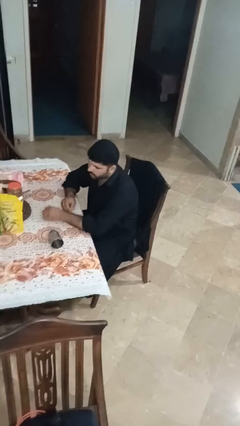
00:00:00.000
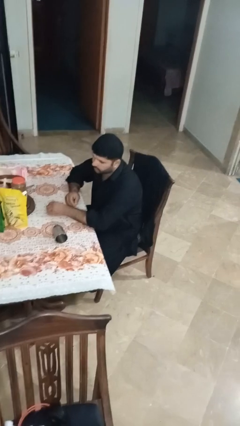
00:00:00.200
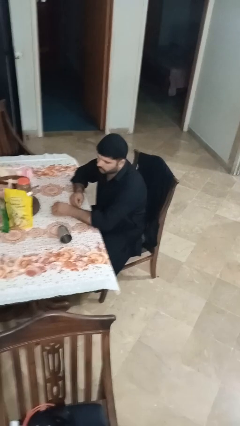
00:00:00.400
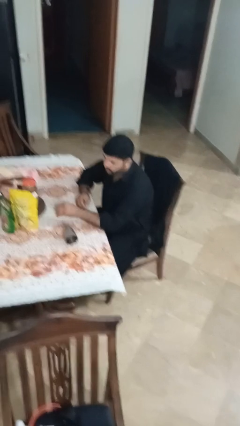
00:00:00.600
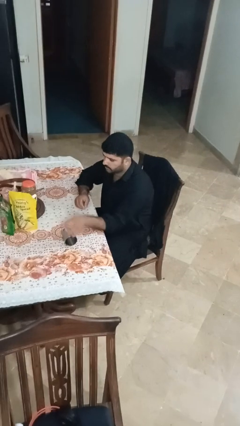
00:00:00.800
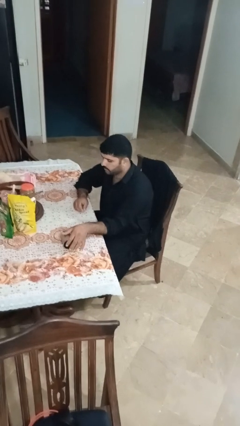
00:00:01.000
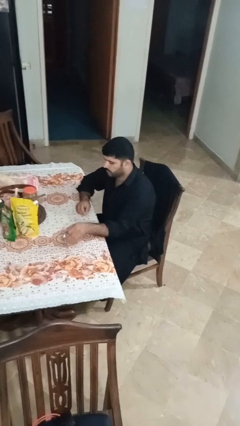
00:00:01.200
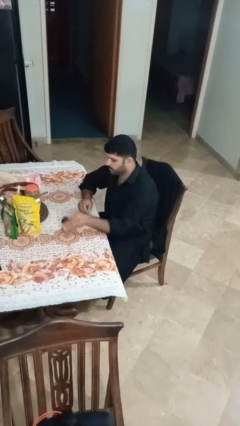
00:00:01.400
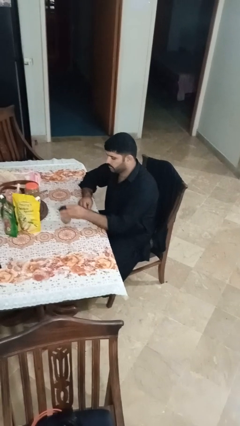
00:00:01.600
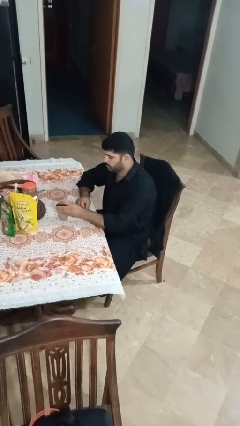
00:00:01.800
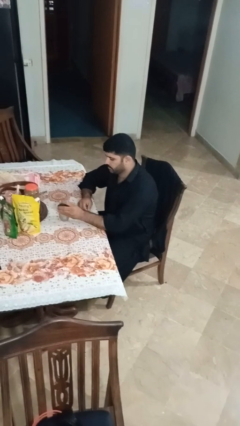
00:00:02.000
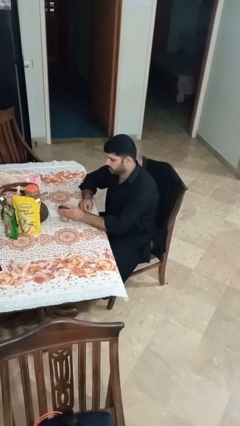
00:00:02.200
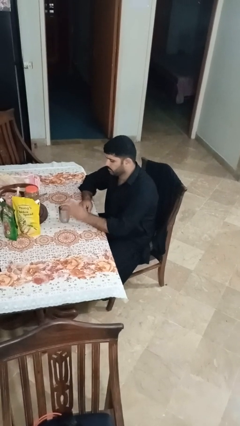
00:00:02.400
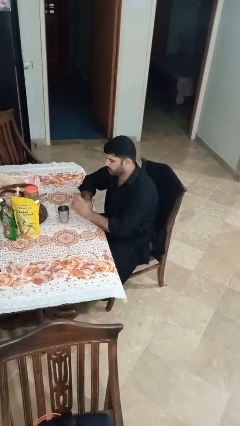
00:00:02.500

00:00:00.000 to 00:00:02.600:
person sets upright glass

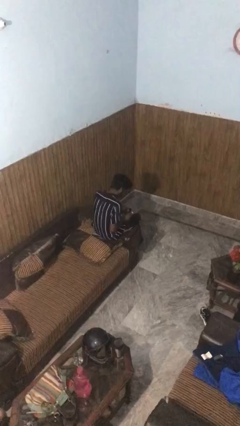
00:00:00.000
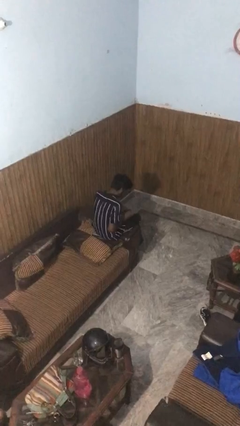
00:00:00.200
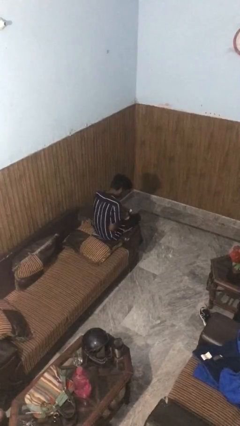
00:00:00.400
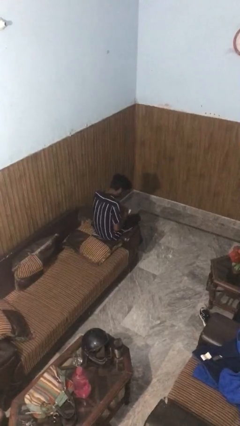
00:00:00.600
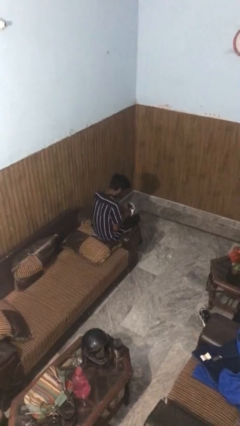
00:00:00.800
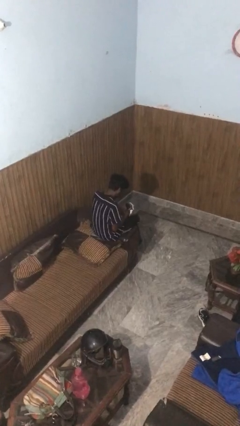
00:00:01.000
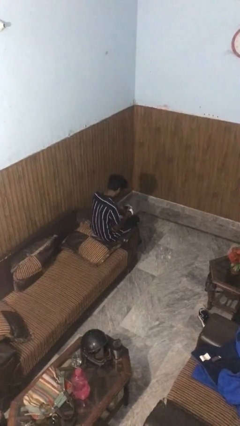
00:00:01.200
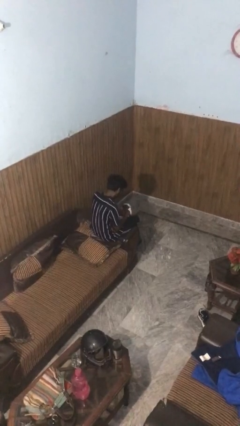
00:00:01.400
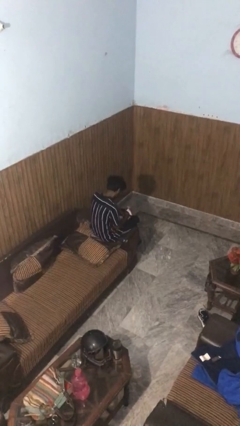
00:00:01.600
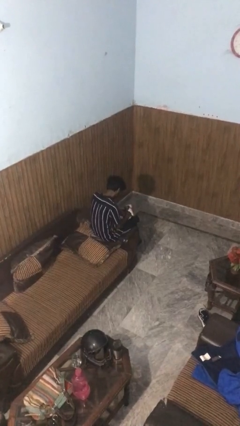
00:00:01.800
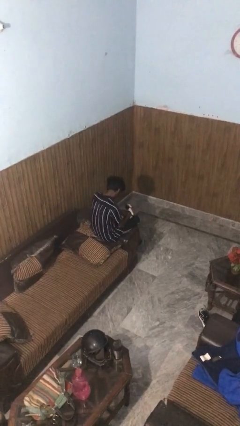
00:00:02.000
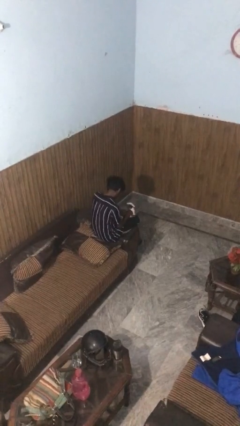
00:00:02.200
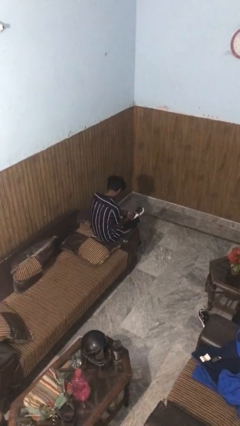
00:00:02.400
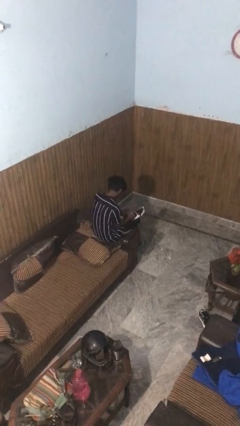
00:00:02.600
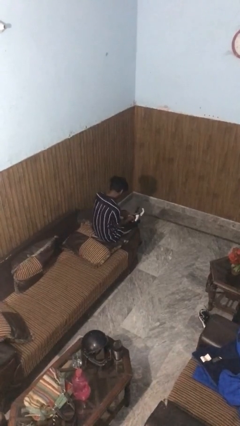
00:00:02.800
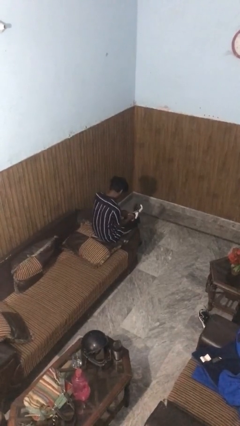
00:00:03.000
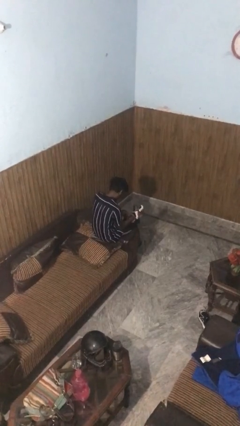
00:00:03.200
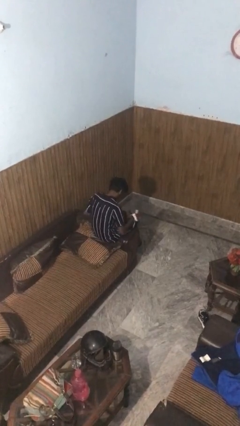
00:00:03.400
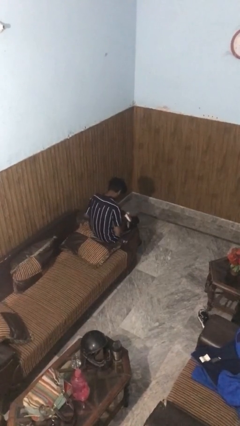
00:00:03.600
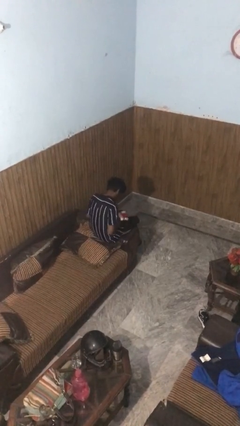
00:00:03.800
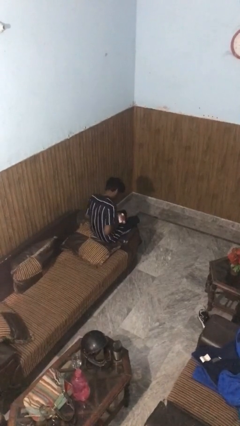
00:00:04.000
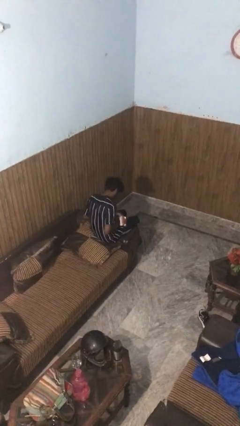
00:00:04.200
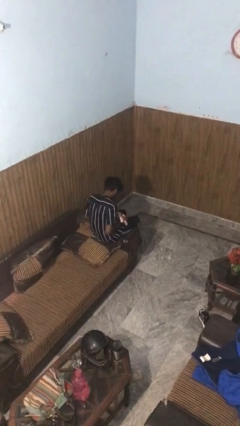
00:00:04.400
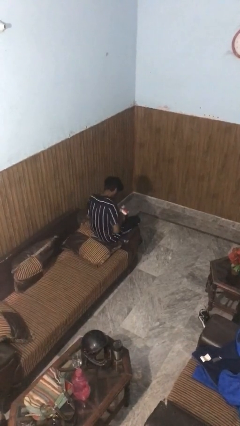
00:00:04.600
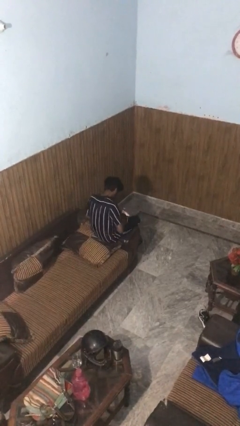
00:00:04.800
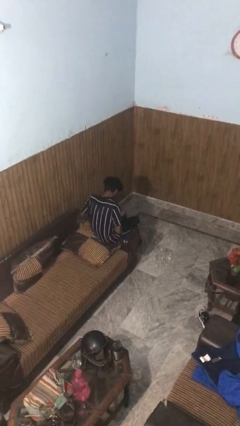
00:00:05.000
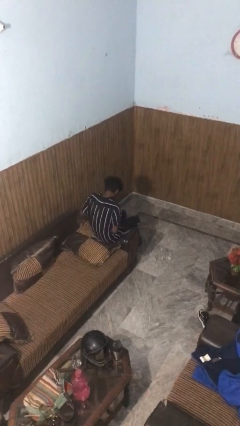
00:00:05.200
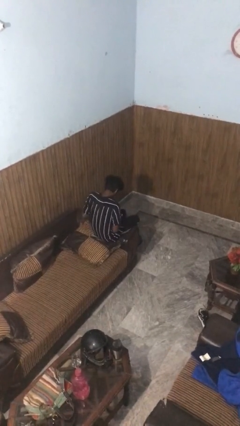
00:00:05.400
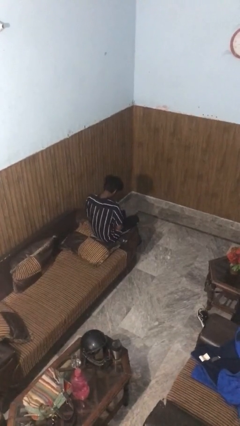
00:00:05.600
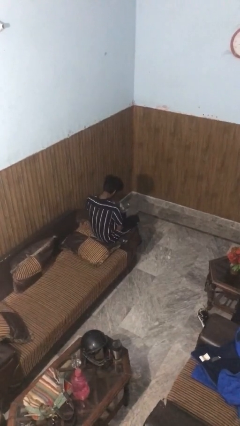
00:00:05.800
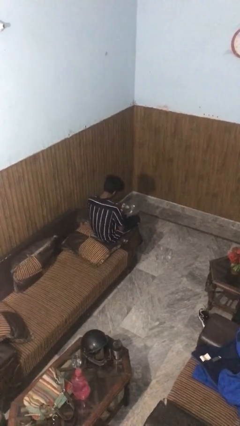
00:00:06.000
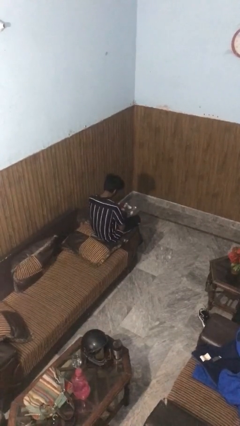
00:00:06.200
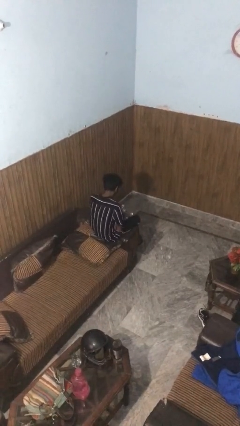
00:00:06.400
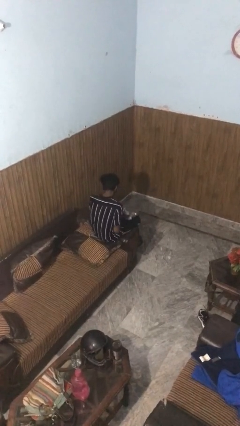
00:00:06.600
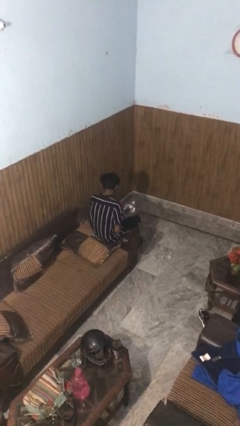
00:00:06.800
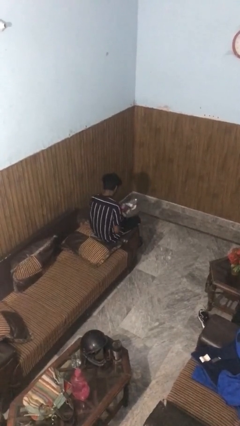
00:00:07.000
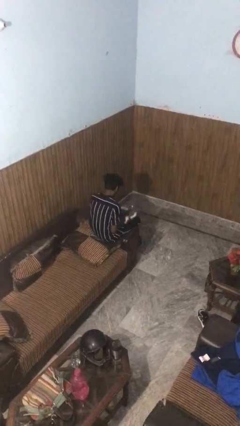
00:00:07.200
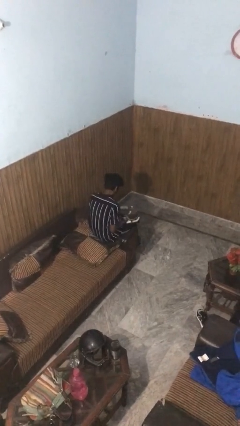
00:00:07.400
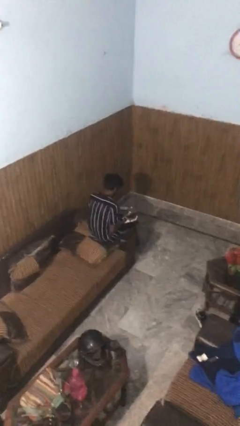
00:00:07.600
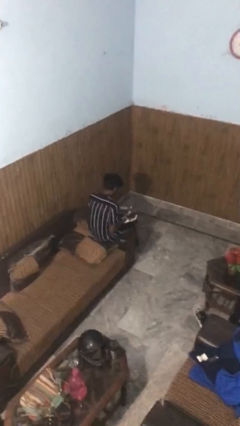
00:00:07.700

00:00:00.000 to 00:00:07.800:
person puts on gloves

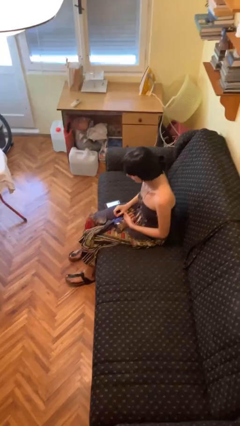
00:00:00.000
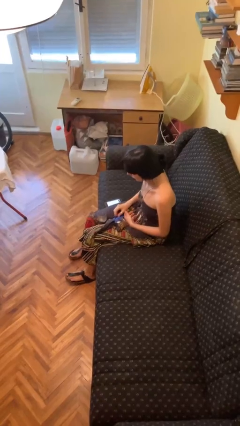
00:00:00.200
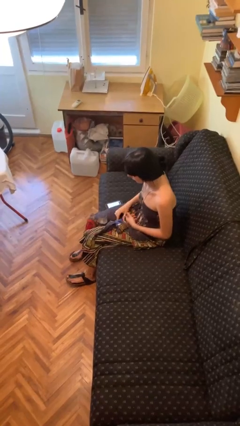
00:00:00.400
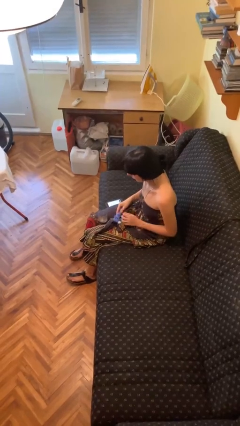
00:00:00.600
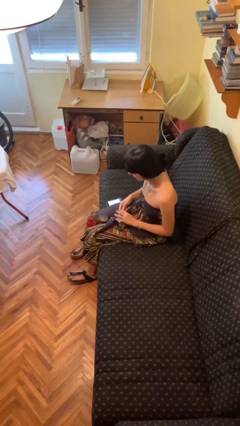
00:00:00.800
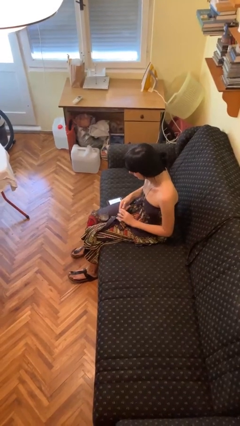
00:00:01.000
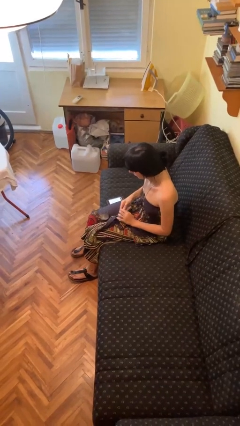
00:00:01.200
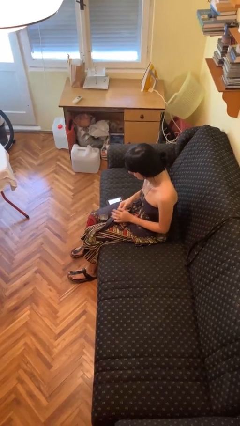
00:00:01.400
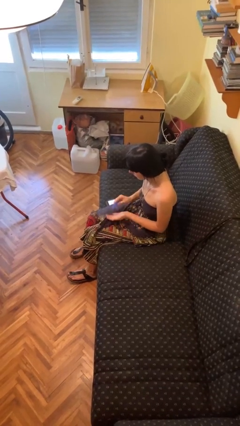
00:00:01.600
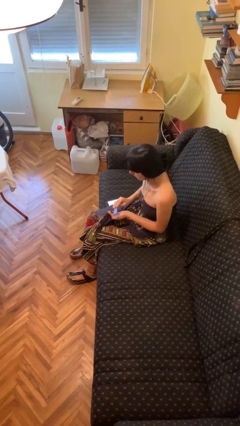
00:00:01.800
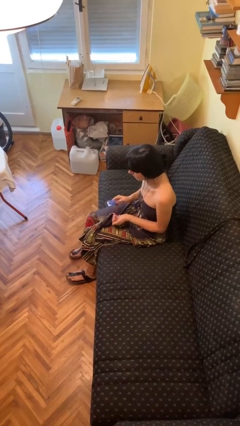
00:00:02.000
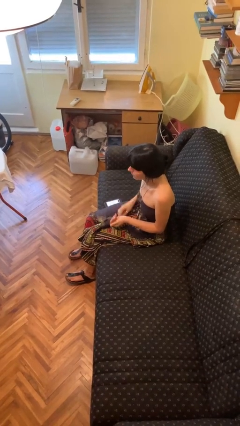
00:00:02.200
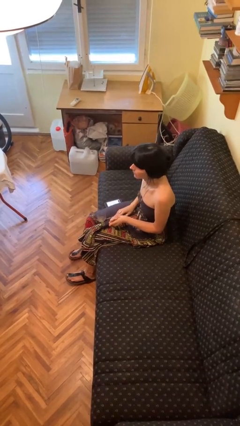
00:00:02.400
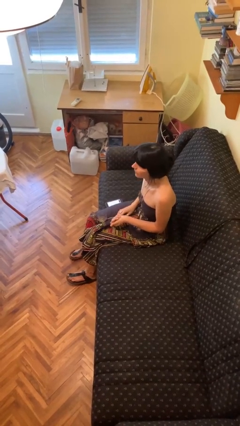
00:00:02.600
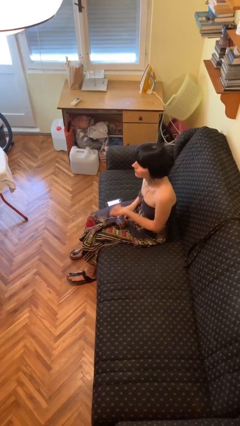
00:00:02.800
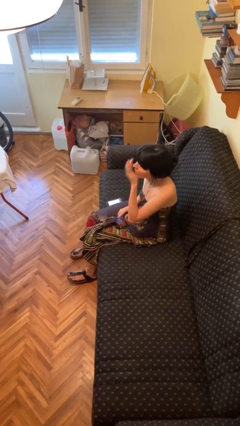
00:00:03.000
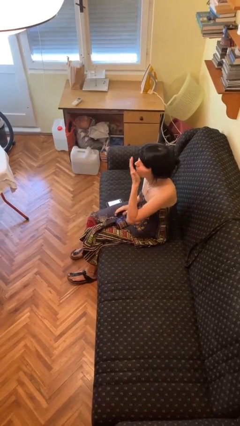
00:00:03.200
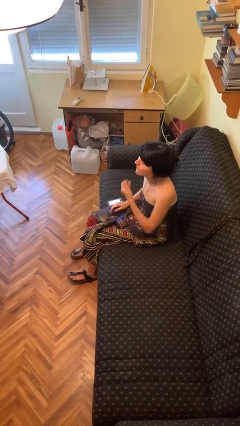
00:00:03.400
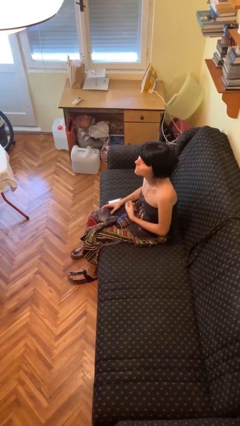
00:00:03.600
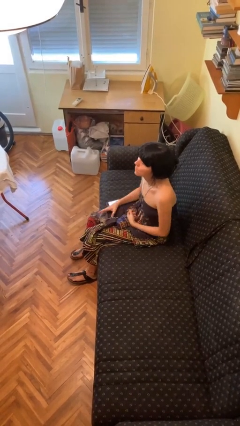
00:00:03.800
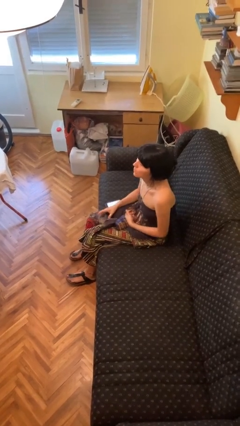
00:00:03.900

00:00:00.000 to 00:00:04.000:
person takes medicine pills

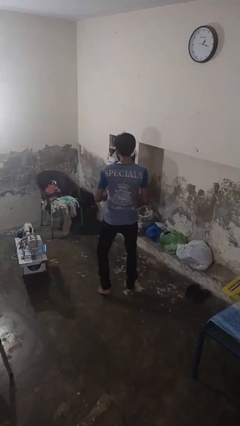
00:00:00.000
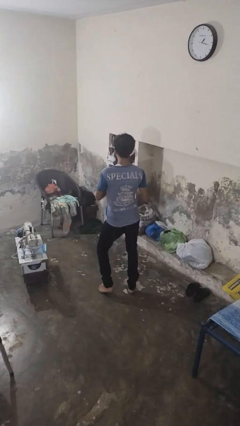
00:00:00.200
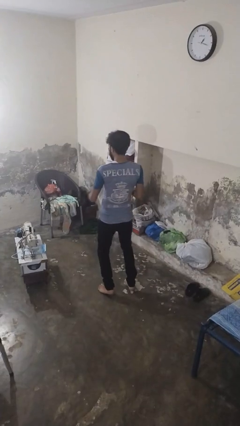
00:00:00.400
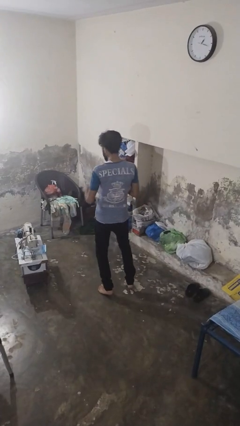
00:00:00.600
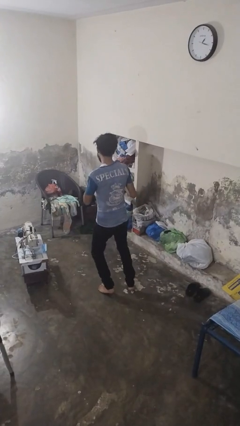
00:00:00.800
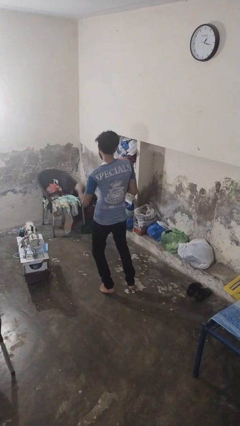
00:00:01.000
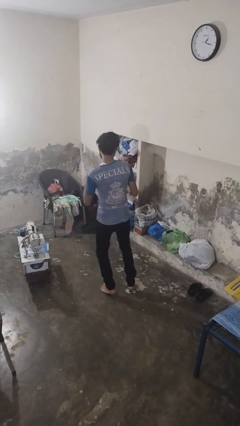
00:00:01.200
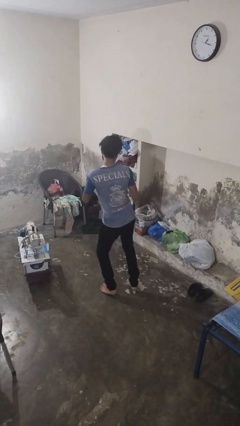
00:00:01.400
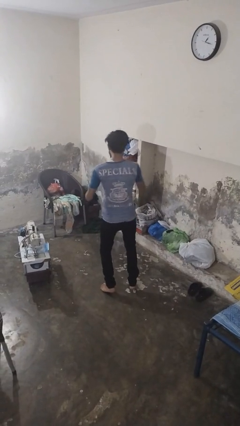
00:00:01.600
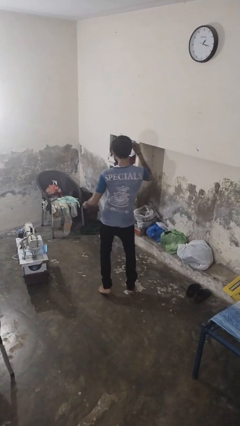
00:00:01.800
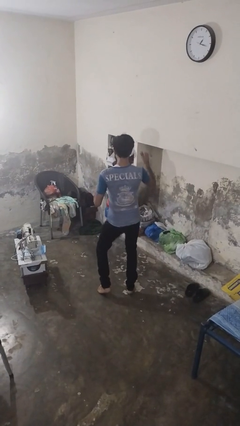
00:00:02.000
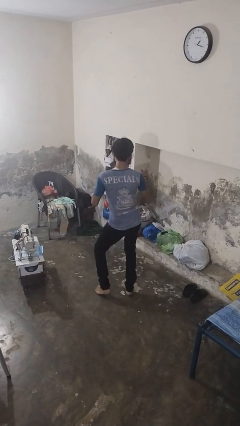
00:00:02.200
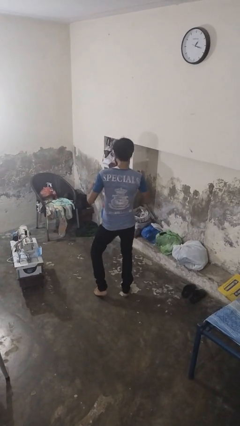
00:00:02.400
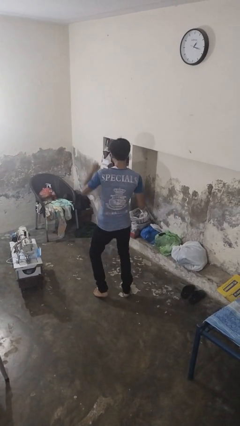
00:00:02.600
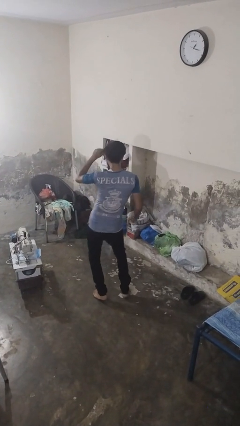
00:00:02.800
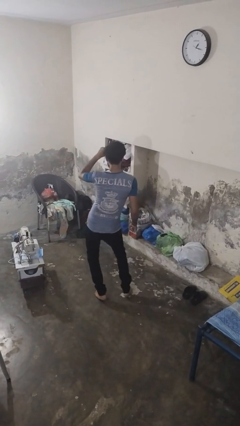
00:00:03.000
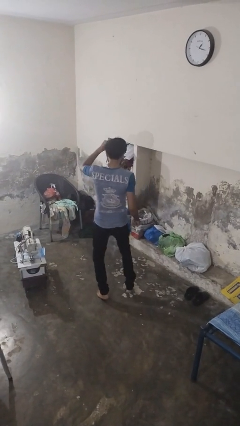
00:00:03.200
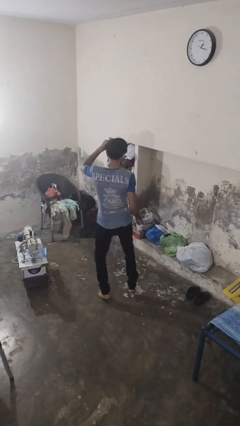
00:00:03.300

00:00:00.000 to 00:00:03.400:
person dances in place
